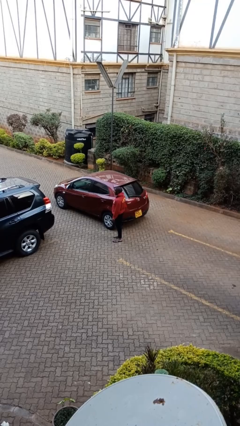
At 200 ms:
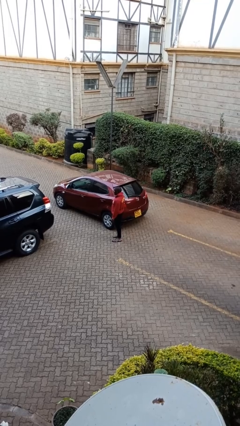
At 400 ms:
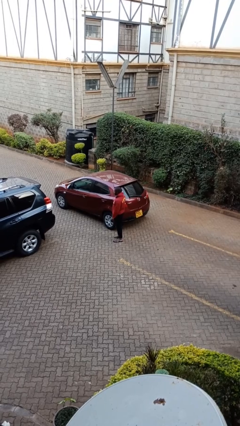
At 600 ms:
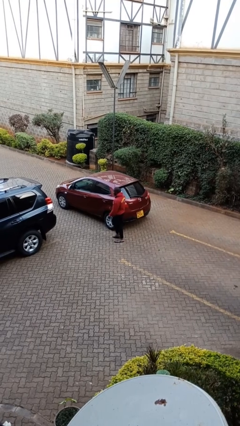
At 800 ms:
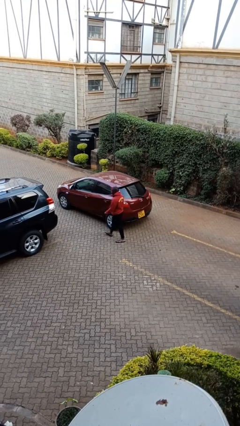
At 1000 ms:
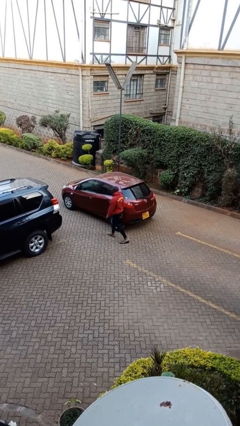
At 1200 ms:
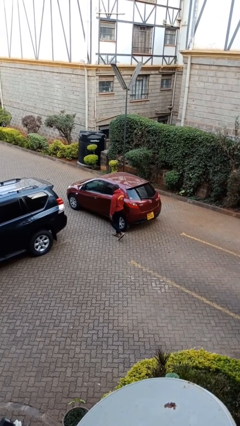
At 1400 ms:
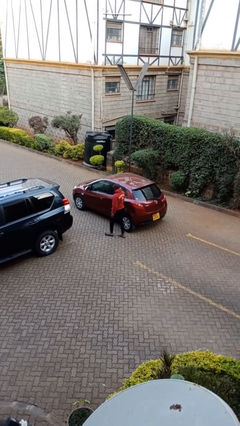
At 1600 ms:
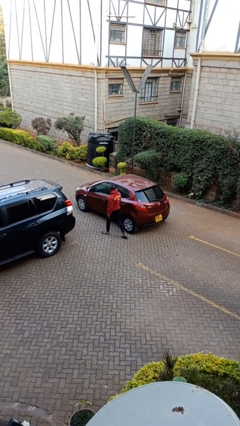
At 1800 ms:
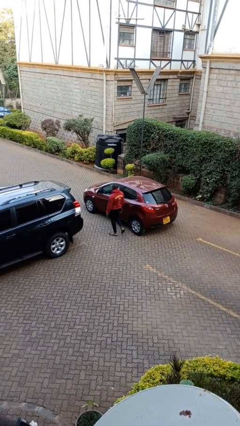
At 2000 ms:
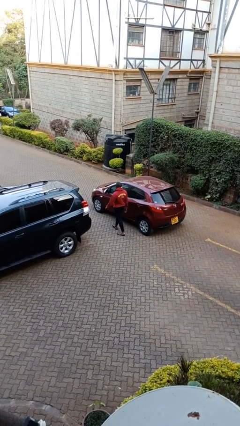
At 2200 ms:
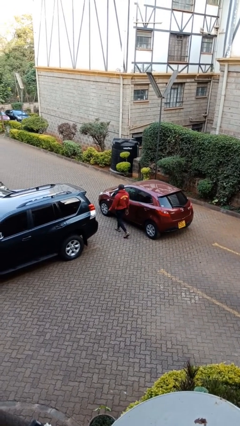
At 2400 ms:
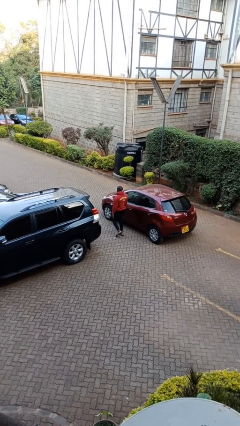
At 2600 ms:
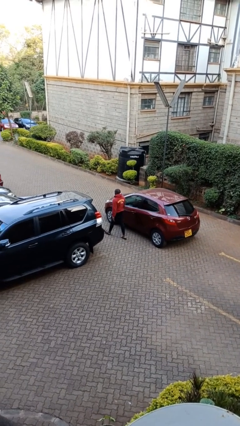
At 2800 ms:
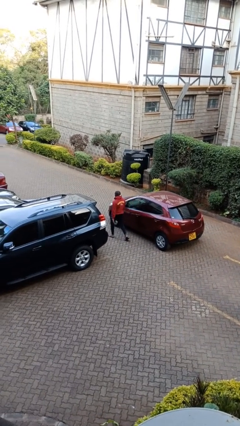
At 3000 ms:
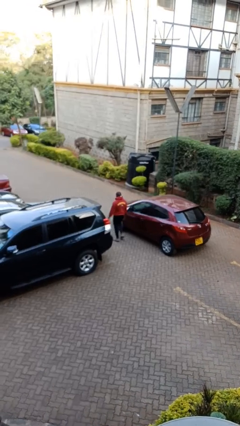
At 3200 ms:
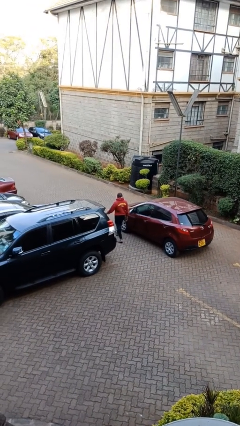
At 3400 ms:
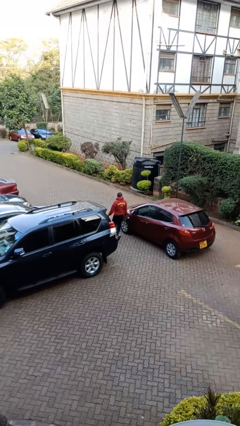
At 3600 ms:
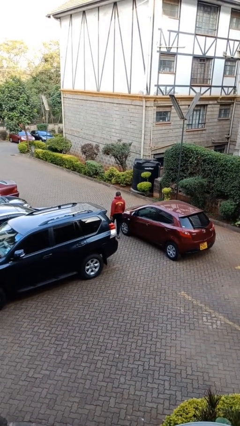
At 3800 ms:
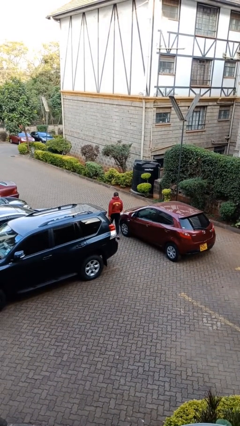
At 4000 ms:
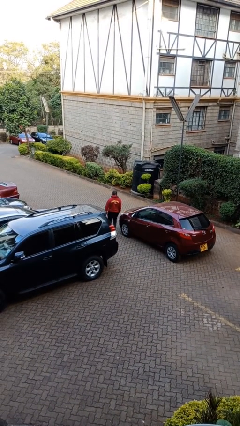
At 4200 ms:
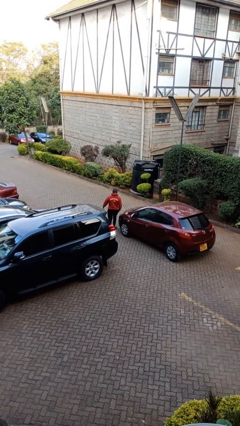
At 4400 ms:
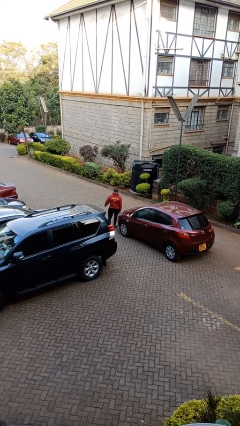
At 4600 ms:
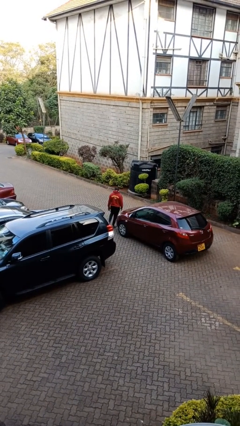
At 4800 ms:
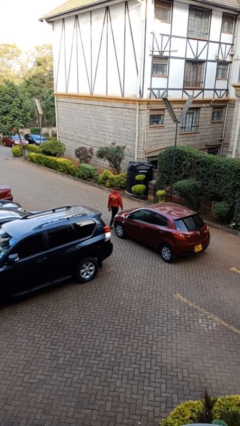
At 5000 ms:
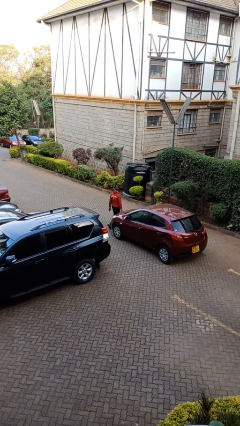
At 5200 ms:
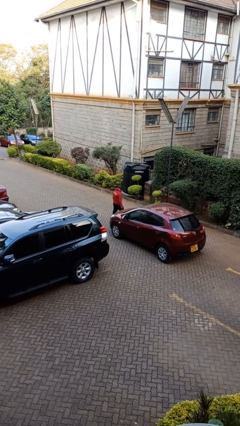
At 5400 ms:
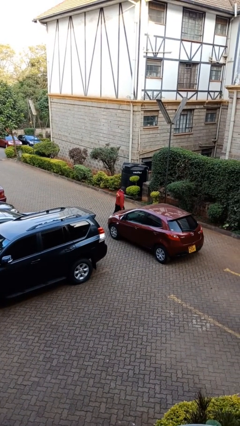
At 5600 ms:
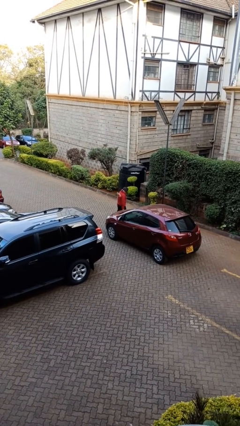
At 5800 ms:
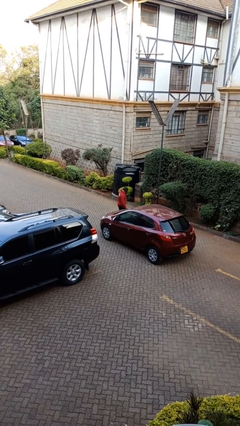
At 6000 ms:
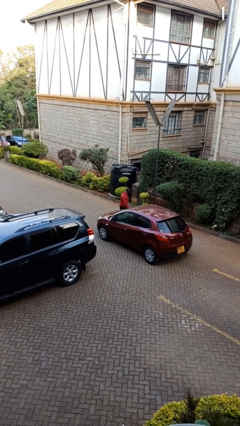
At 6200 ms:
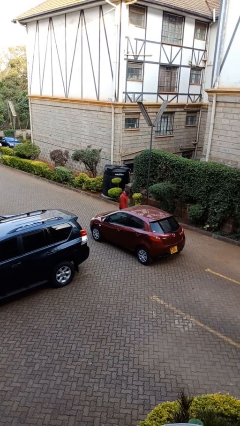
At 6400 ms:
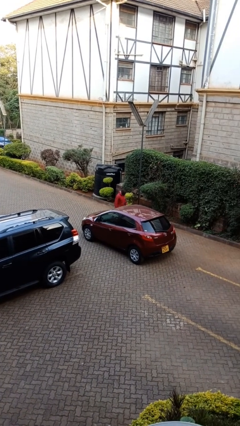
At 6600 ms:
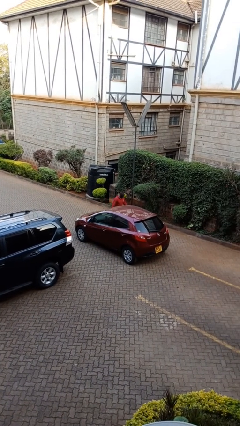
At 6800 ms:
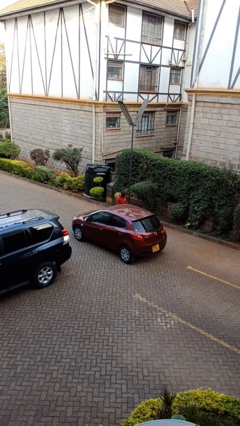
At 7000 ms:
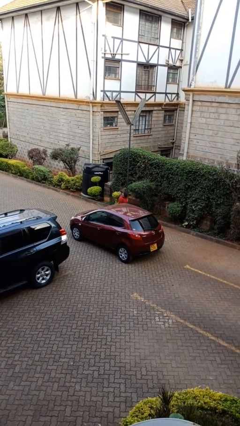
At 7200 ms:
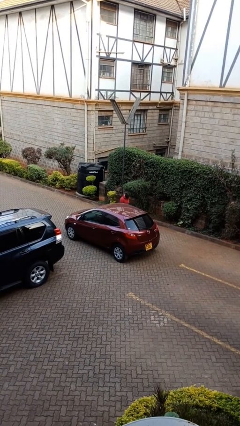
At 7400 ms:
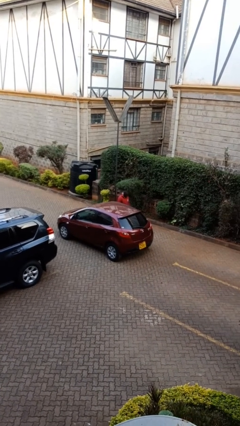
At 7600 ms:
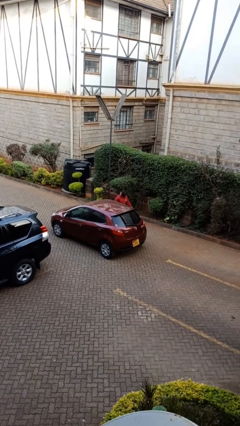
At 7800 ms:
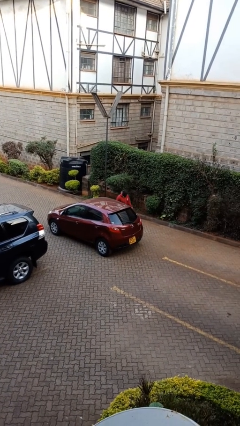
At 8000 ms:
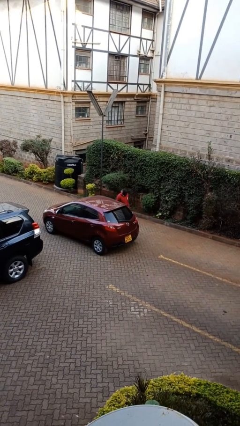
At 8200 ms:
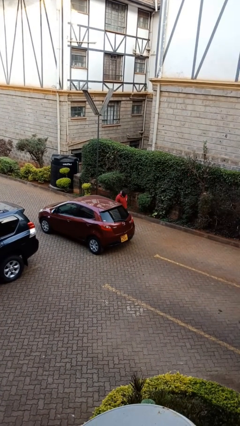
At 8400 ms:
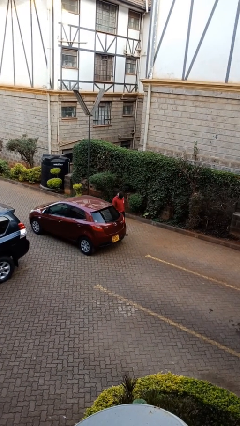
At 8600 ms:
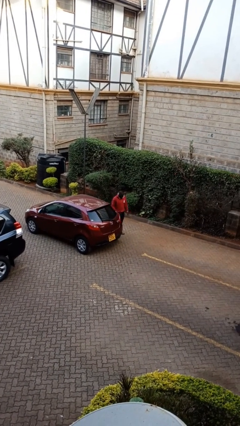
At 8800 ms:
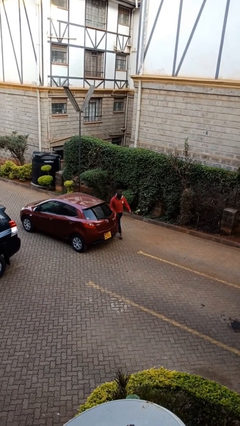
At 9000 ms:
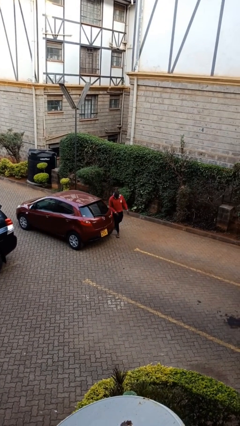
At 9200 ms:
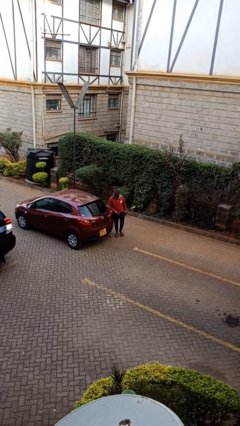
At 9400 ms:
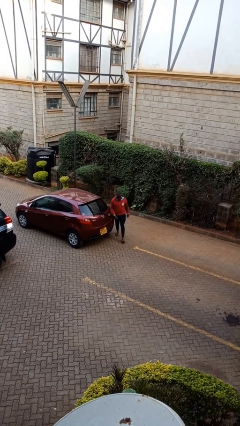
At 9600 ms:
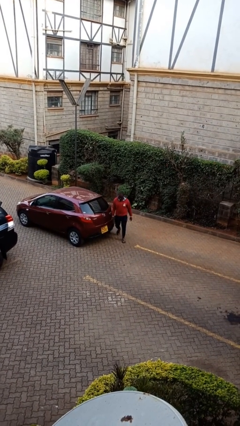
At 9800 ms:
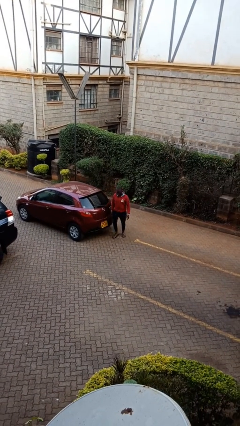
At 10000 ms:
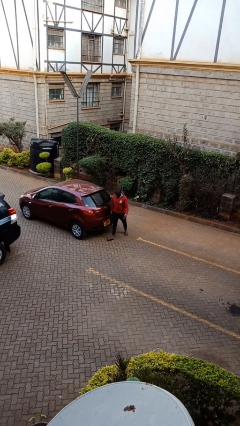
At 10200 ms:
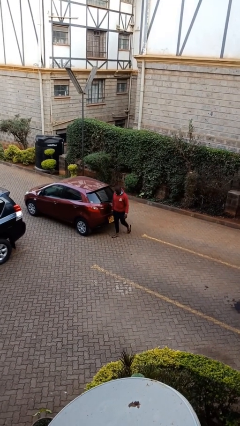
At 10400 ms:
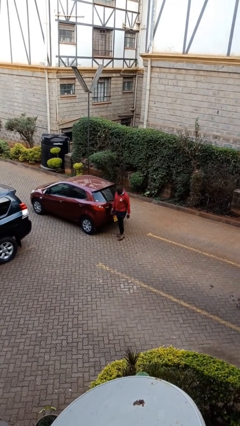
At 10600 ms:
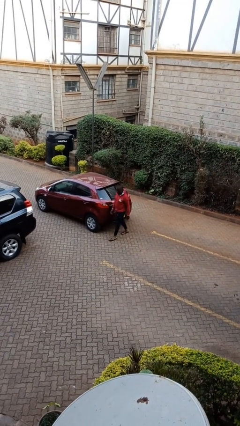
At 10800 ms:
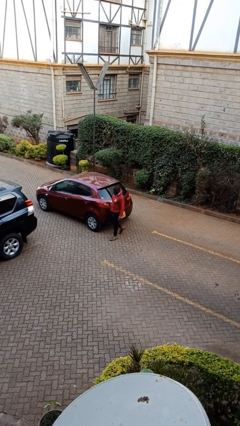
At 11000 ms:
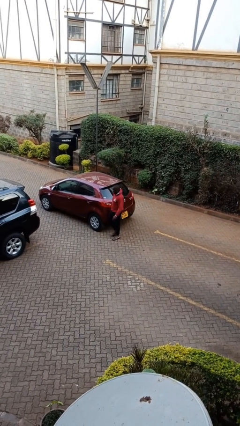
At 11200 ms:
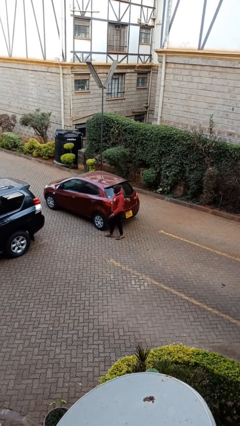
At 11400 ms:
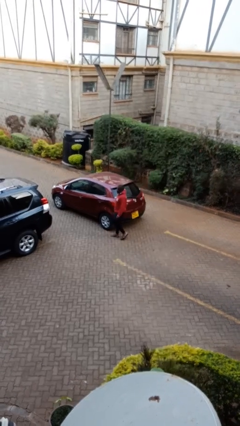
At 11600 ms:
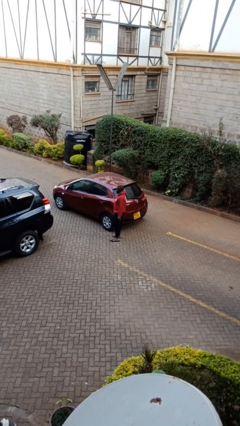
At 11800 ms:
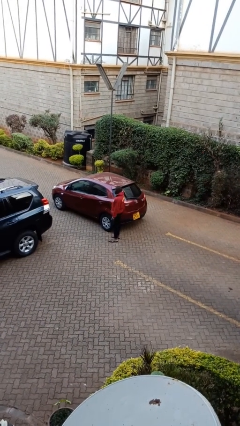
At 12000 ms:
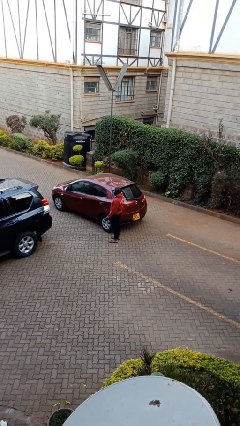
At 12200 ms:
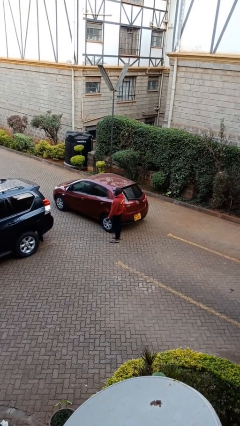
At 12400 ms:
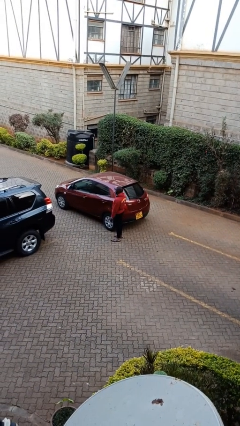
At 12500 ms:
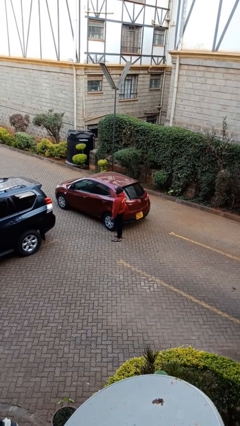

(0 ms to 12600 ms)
person walks around car

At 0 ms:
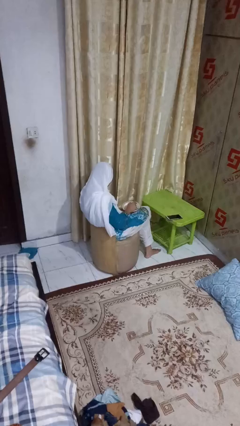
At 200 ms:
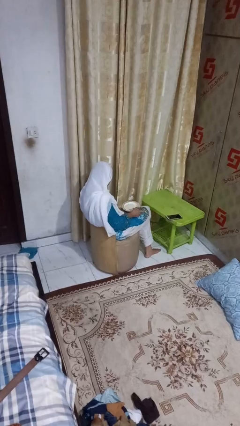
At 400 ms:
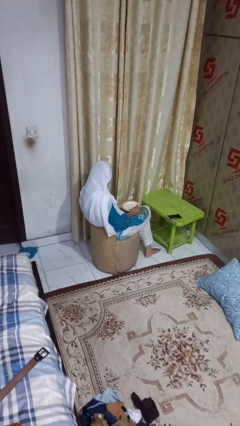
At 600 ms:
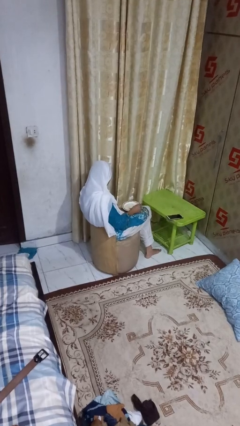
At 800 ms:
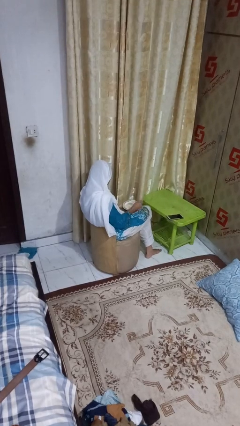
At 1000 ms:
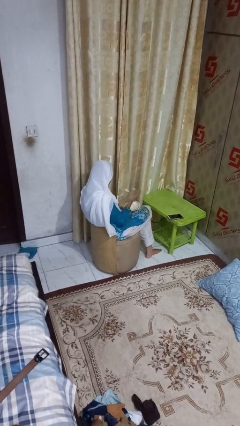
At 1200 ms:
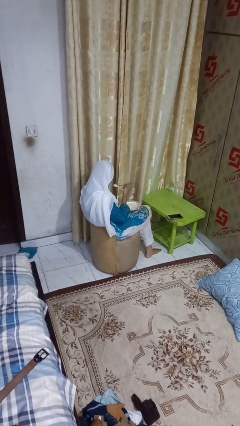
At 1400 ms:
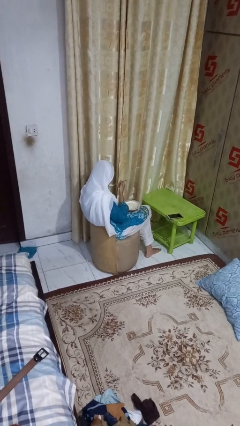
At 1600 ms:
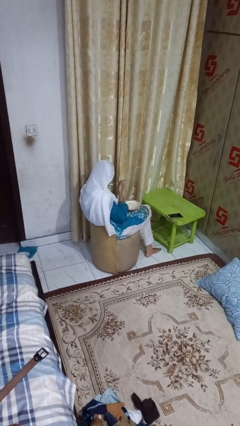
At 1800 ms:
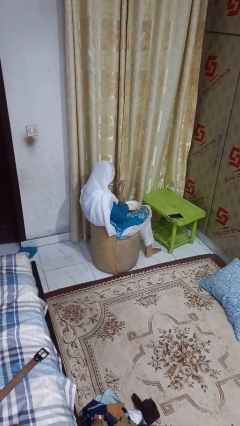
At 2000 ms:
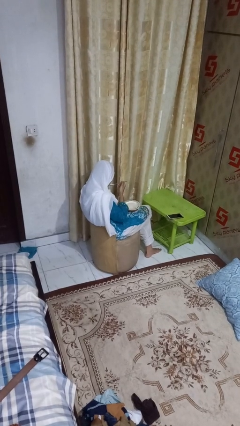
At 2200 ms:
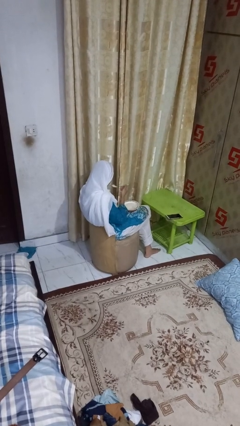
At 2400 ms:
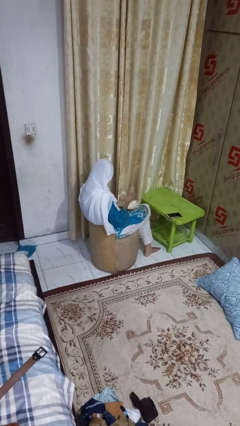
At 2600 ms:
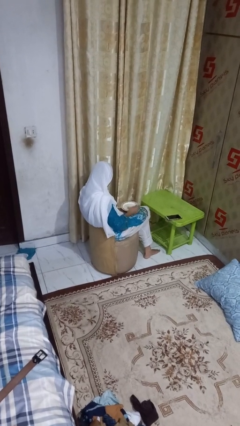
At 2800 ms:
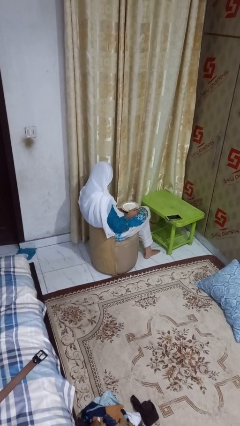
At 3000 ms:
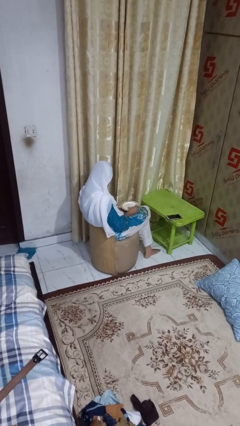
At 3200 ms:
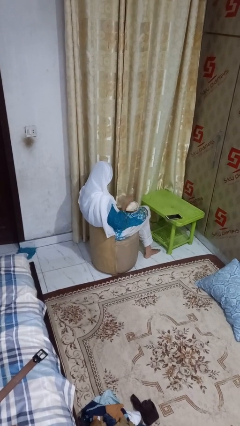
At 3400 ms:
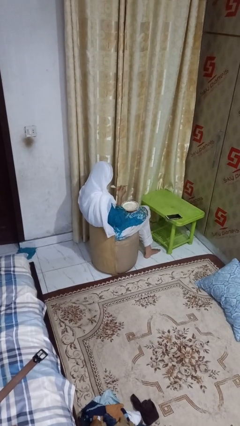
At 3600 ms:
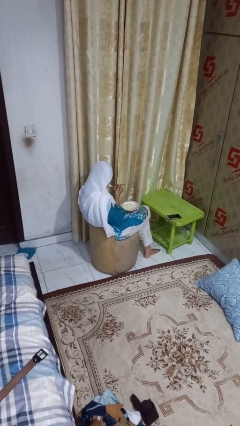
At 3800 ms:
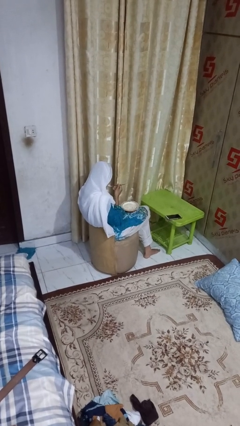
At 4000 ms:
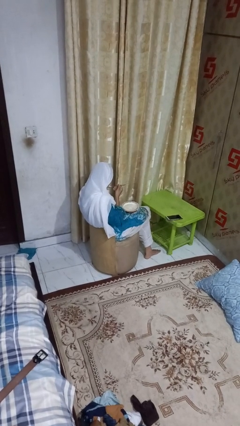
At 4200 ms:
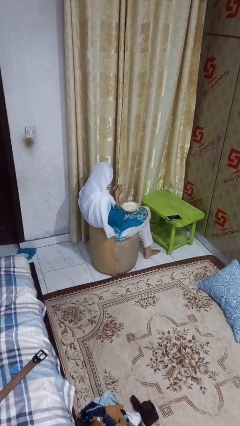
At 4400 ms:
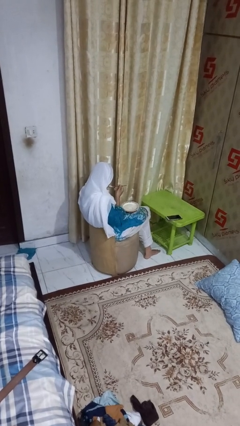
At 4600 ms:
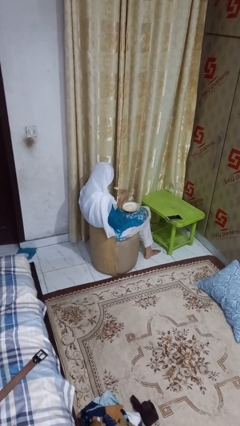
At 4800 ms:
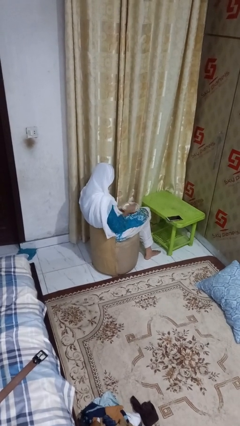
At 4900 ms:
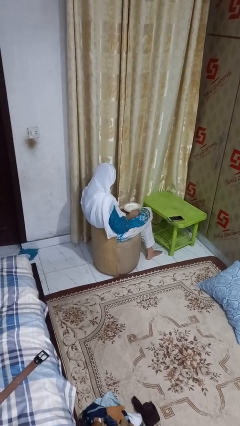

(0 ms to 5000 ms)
person eats with utensil

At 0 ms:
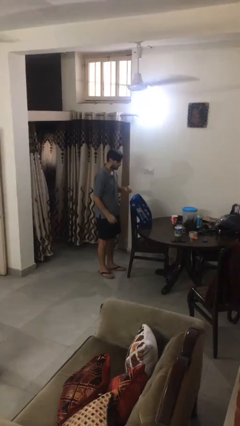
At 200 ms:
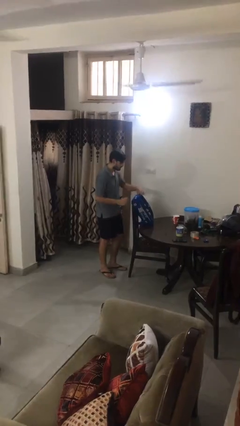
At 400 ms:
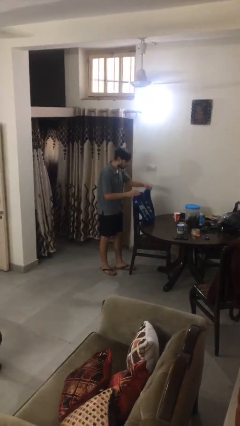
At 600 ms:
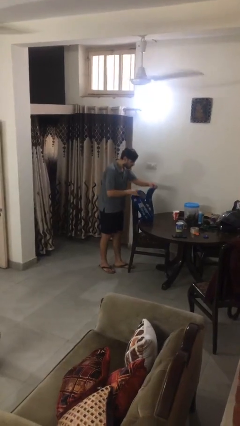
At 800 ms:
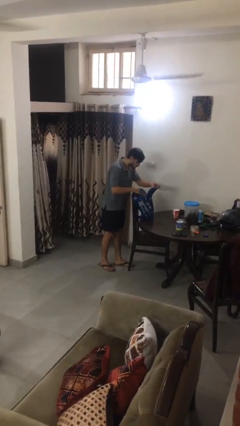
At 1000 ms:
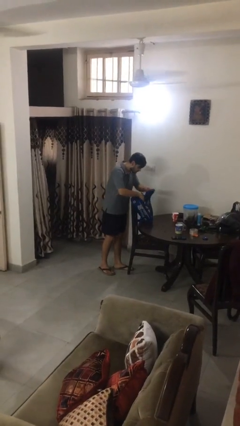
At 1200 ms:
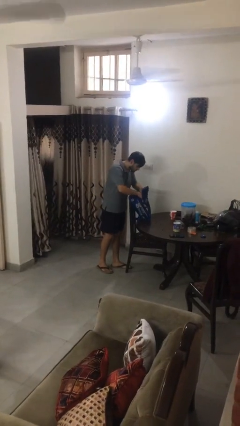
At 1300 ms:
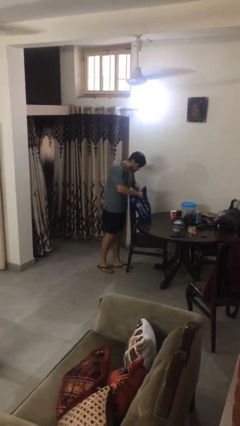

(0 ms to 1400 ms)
person searches in backpack
